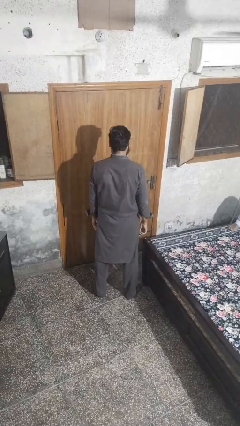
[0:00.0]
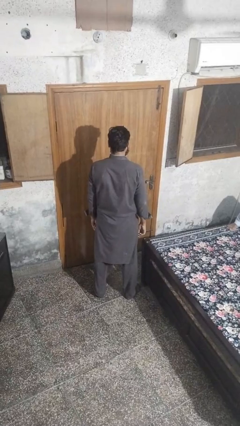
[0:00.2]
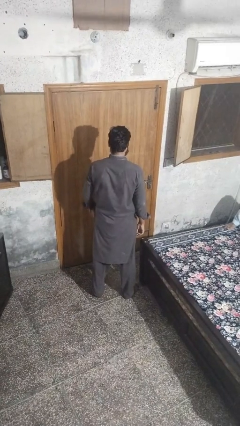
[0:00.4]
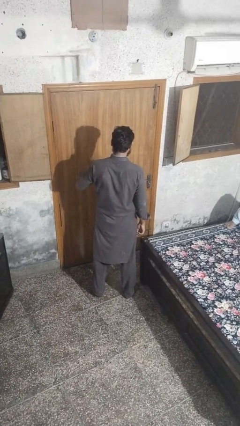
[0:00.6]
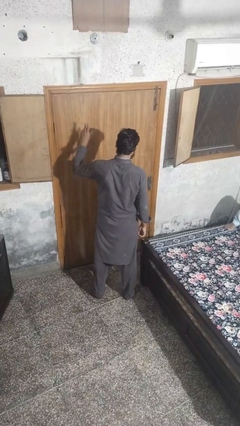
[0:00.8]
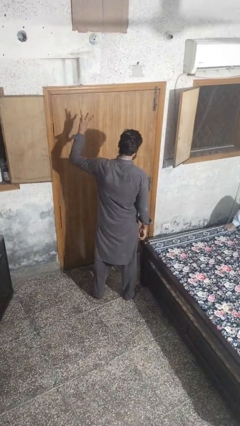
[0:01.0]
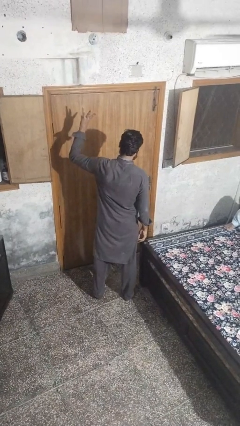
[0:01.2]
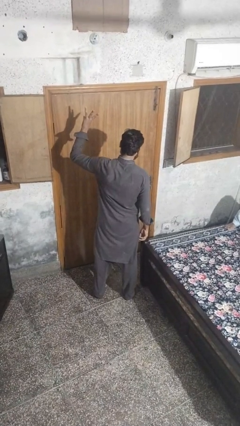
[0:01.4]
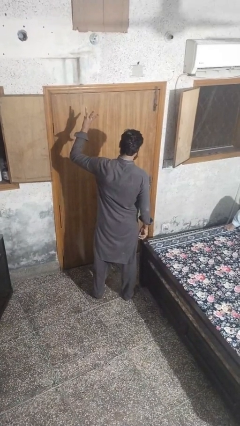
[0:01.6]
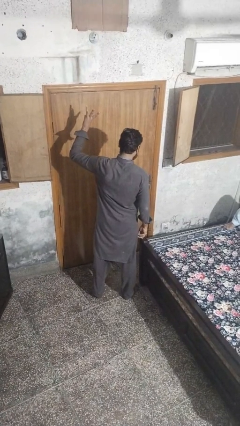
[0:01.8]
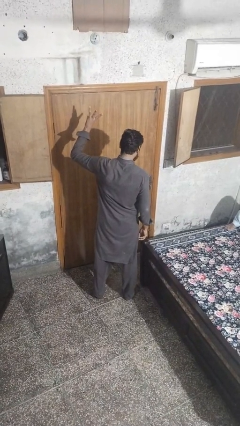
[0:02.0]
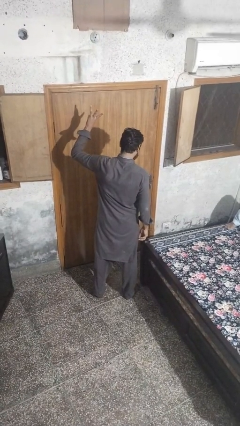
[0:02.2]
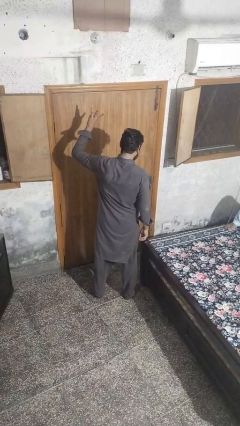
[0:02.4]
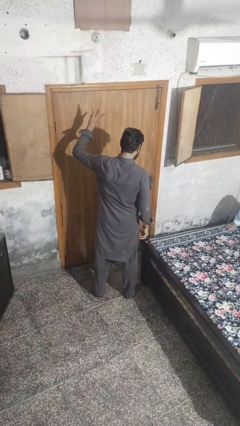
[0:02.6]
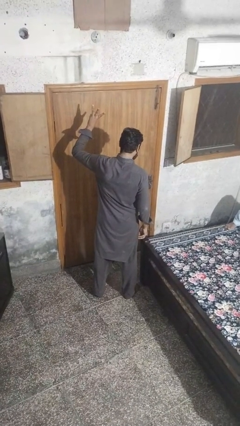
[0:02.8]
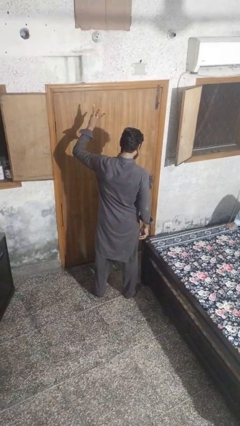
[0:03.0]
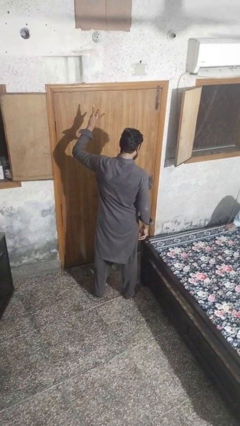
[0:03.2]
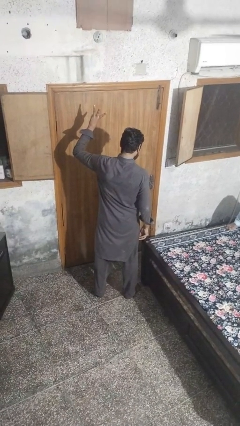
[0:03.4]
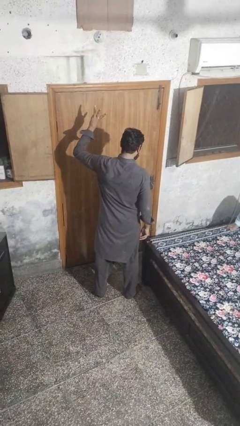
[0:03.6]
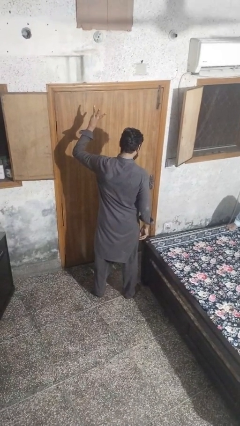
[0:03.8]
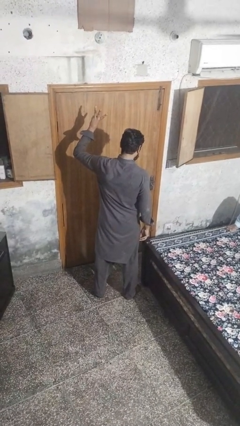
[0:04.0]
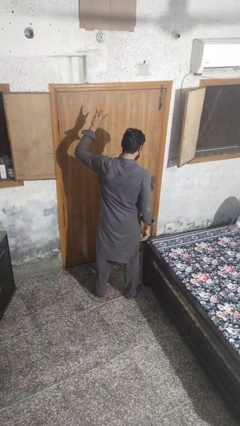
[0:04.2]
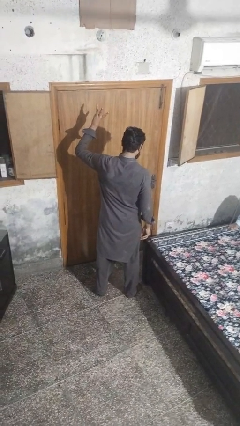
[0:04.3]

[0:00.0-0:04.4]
person gestures number three

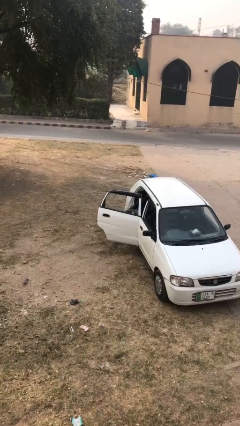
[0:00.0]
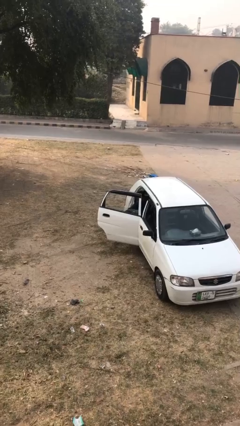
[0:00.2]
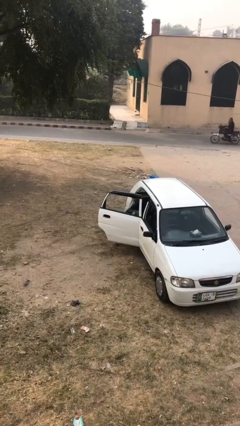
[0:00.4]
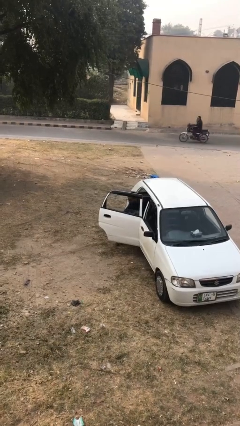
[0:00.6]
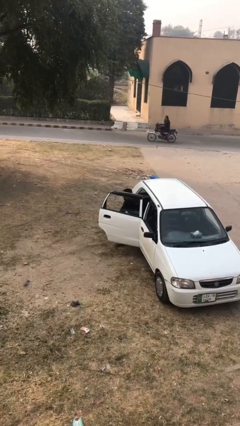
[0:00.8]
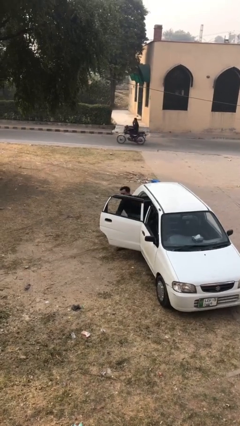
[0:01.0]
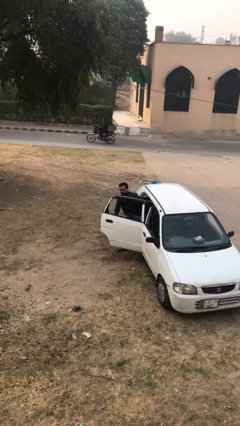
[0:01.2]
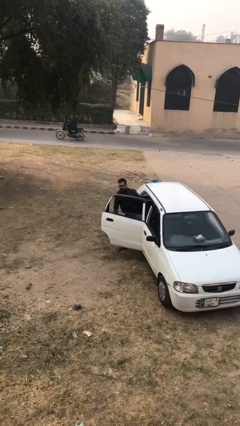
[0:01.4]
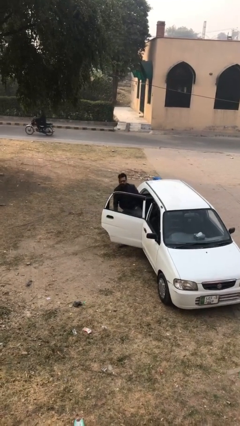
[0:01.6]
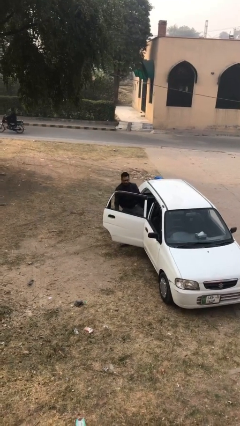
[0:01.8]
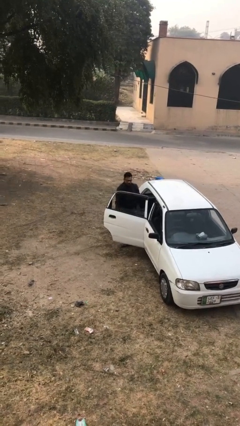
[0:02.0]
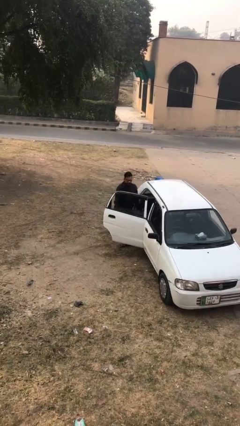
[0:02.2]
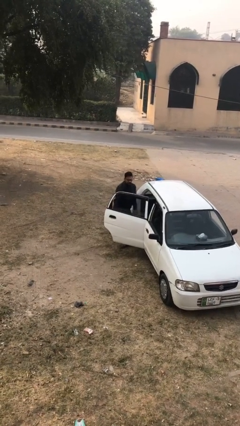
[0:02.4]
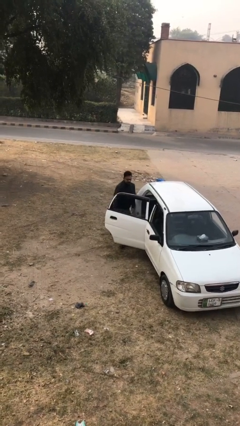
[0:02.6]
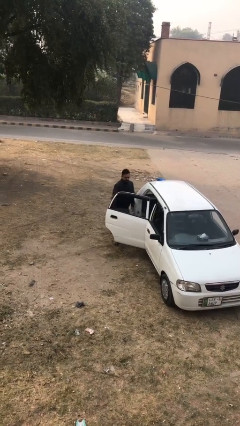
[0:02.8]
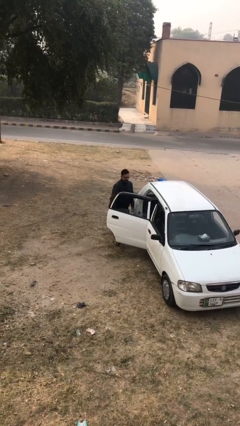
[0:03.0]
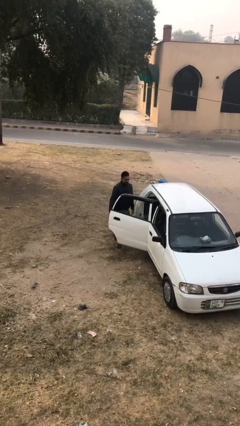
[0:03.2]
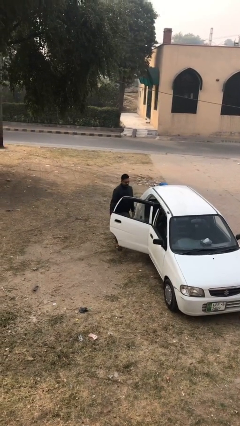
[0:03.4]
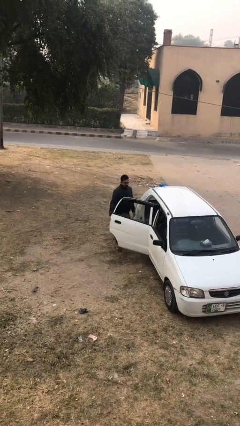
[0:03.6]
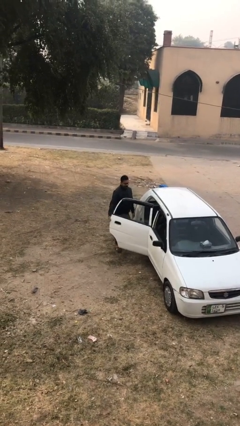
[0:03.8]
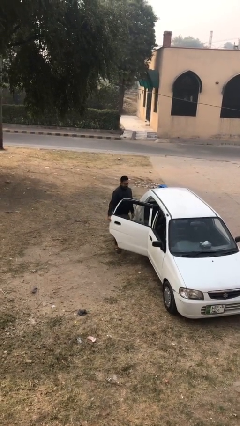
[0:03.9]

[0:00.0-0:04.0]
person exits car

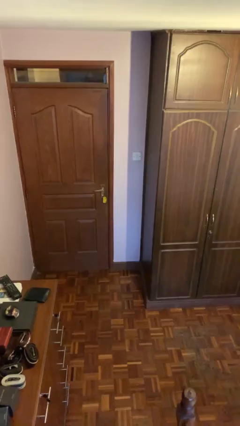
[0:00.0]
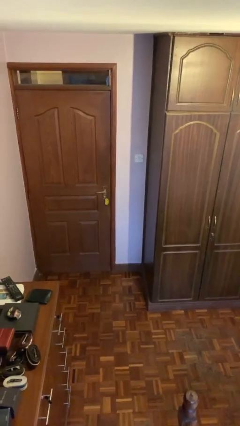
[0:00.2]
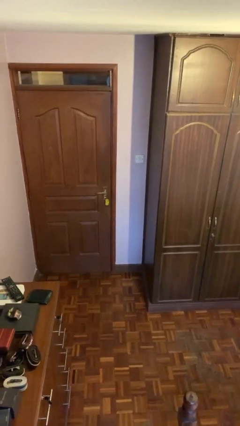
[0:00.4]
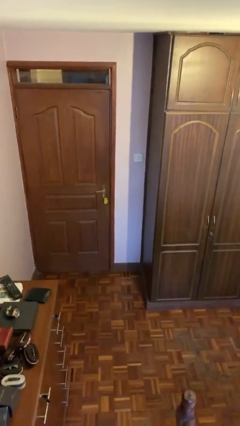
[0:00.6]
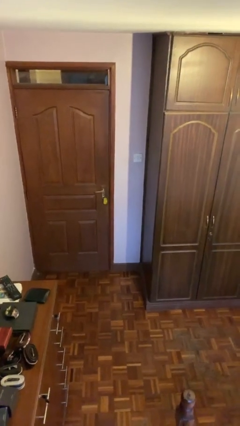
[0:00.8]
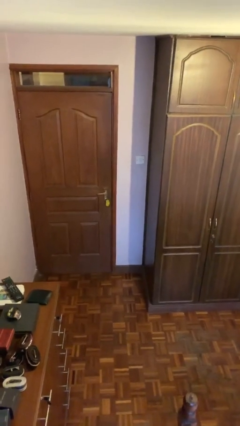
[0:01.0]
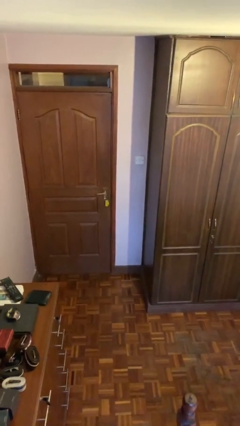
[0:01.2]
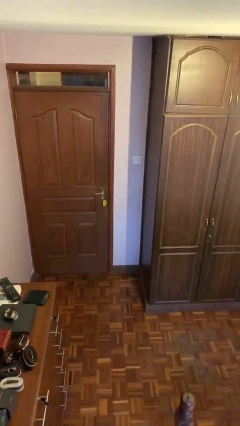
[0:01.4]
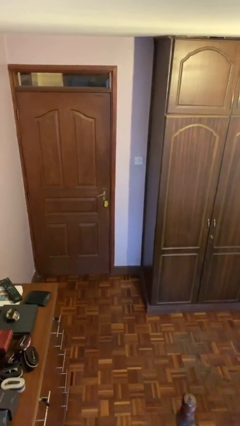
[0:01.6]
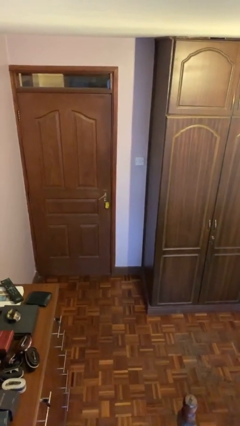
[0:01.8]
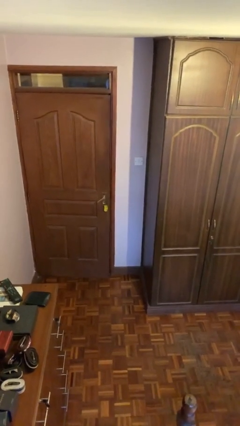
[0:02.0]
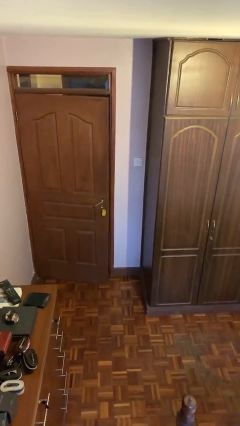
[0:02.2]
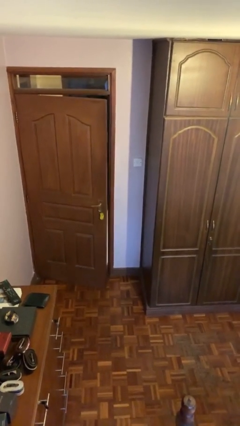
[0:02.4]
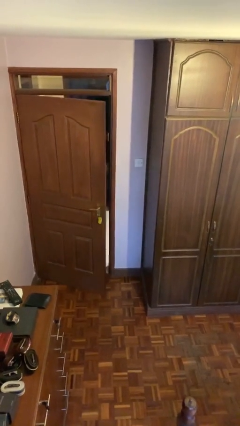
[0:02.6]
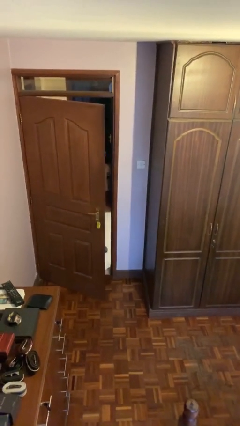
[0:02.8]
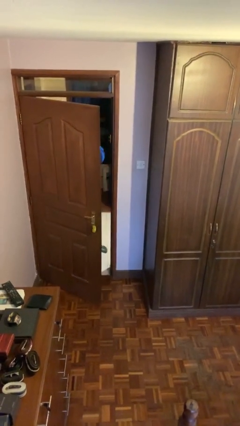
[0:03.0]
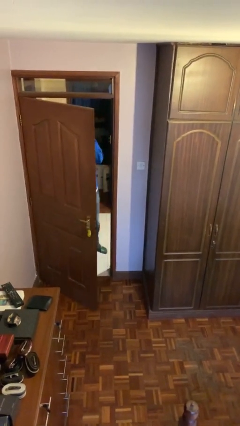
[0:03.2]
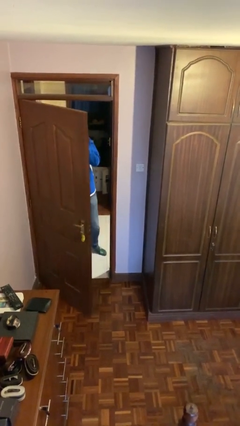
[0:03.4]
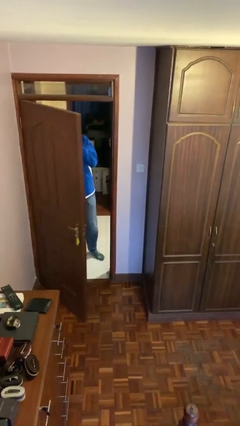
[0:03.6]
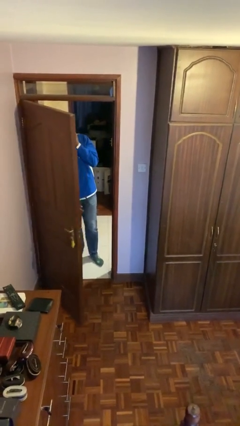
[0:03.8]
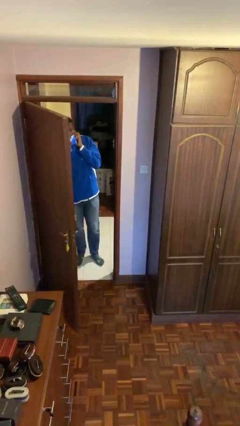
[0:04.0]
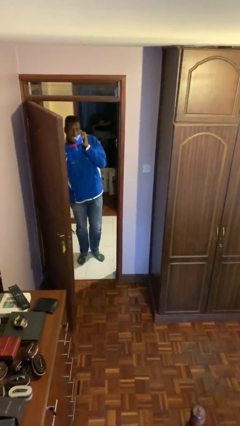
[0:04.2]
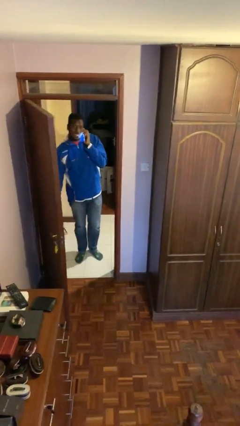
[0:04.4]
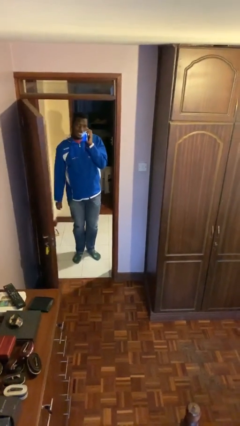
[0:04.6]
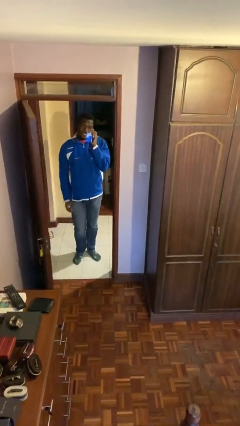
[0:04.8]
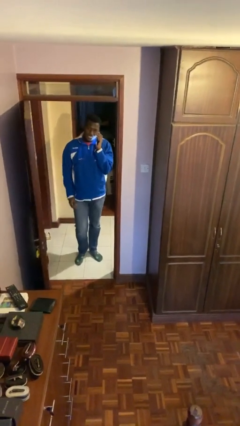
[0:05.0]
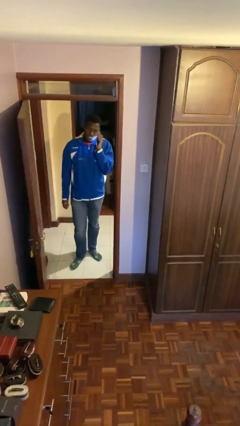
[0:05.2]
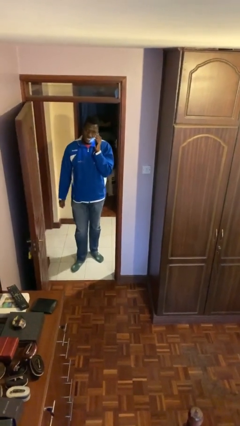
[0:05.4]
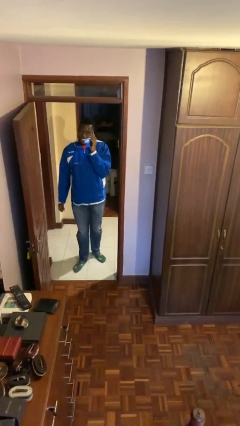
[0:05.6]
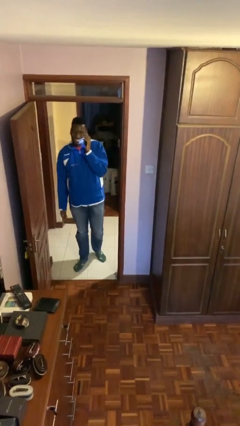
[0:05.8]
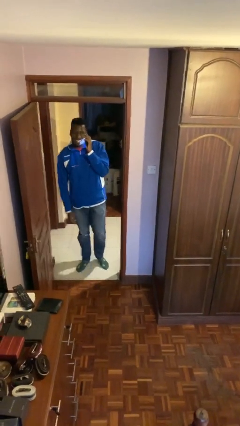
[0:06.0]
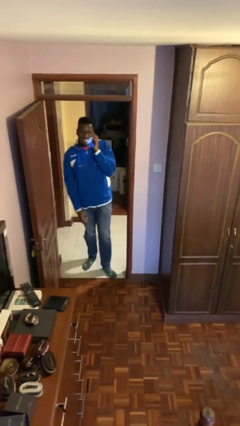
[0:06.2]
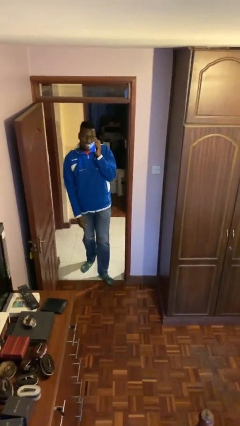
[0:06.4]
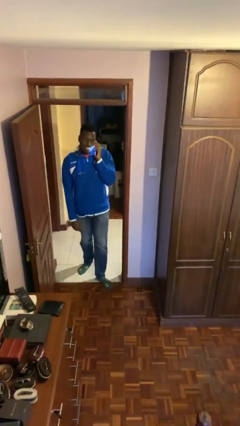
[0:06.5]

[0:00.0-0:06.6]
person opens facility door

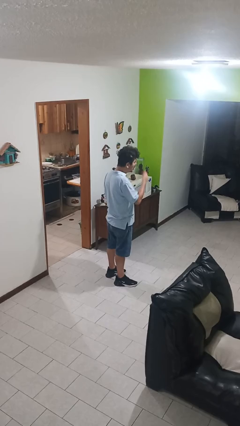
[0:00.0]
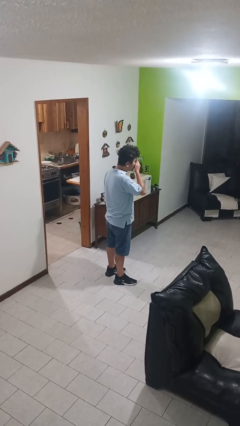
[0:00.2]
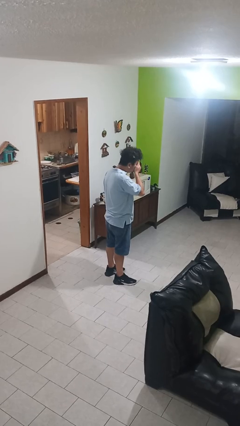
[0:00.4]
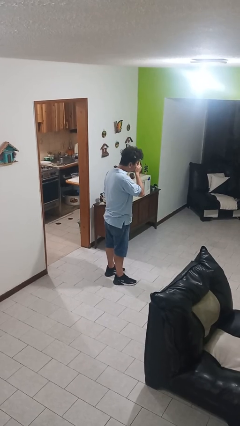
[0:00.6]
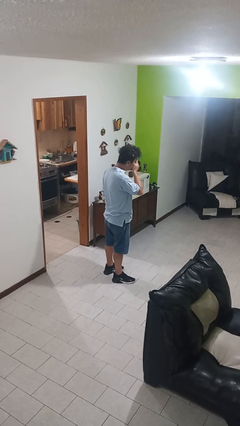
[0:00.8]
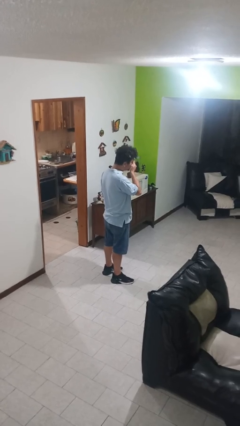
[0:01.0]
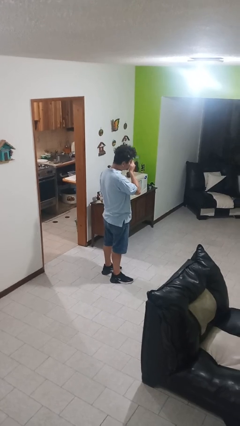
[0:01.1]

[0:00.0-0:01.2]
person sneezes into hand

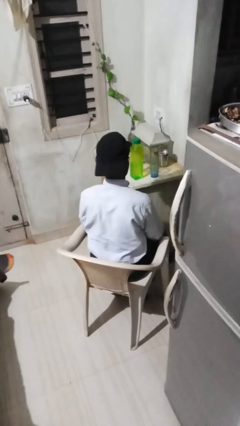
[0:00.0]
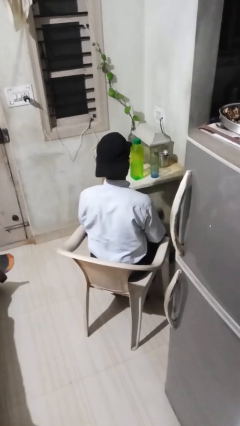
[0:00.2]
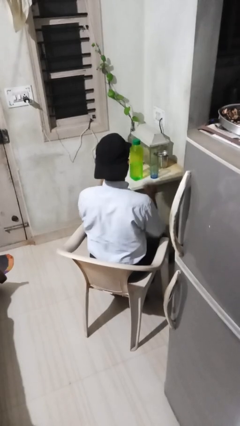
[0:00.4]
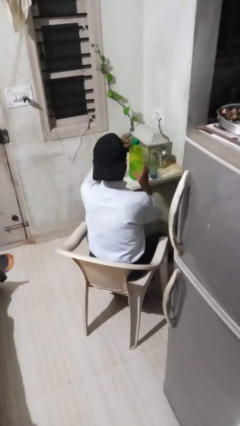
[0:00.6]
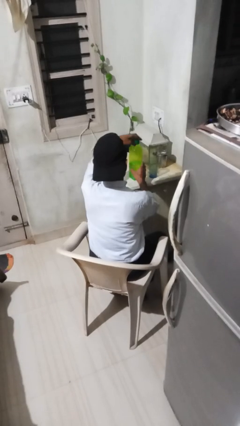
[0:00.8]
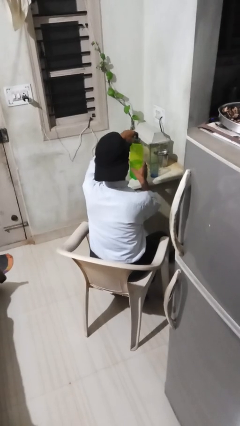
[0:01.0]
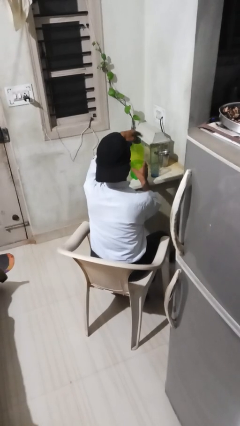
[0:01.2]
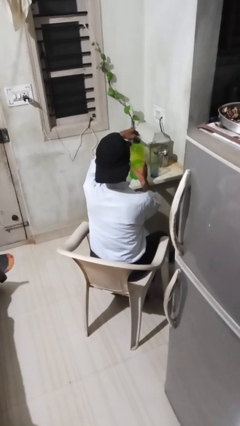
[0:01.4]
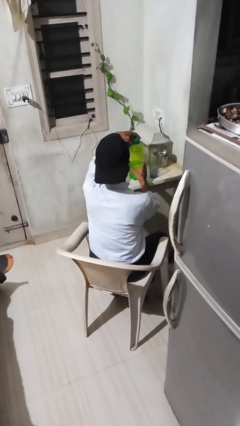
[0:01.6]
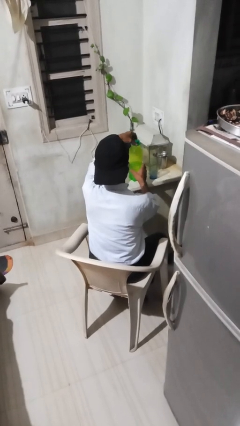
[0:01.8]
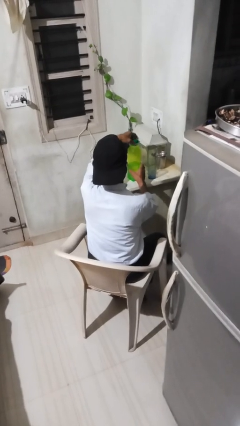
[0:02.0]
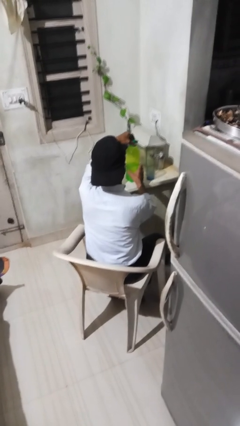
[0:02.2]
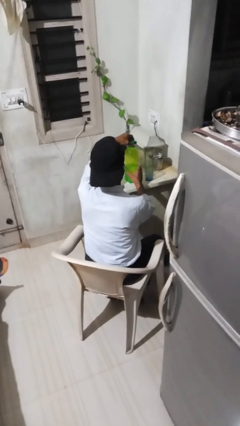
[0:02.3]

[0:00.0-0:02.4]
person unscrews lid from bottle
